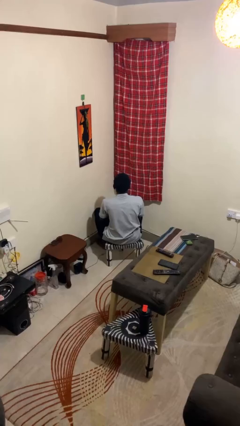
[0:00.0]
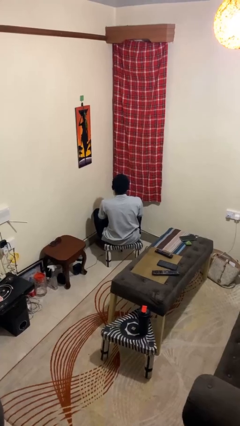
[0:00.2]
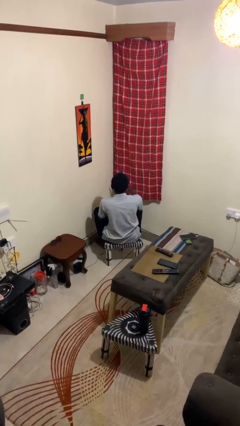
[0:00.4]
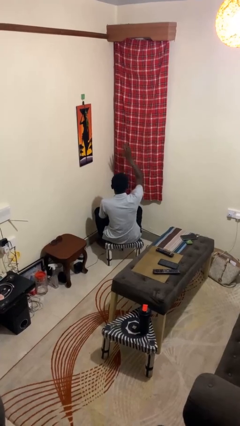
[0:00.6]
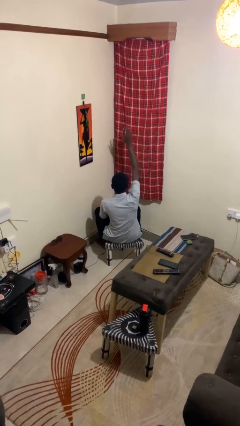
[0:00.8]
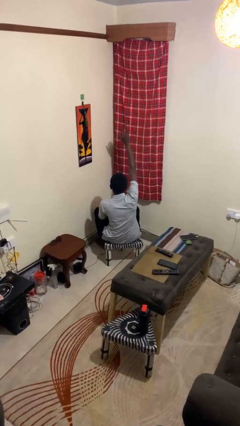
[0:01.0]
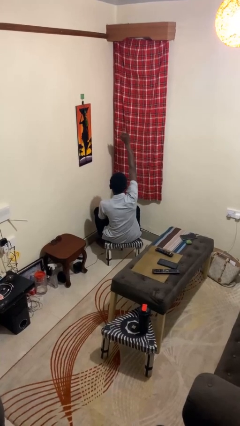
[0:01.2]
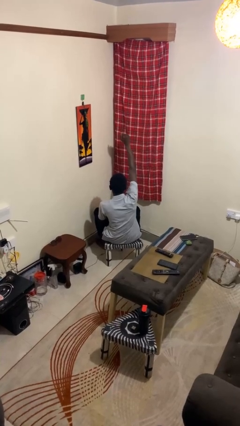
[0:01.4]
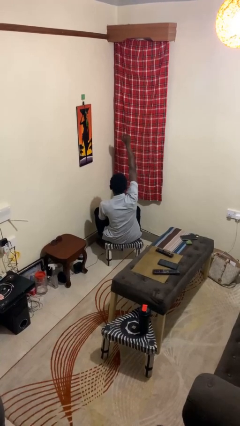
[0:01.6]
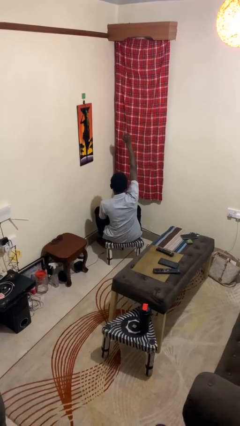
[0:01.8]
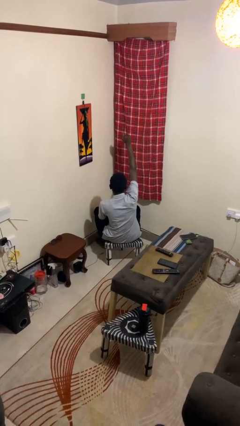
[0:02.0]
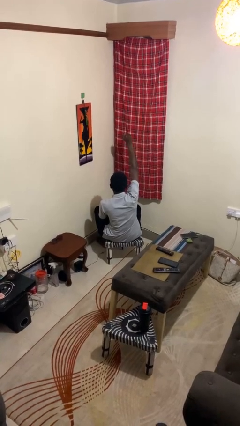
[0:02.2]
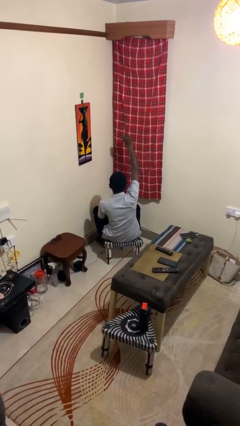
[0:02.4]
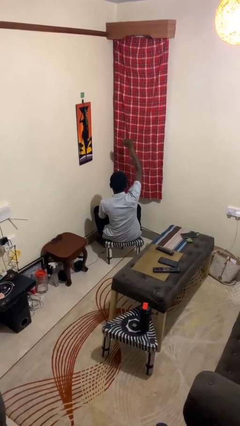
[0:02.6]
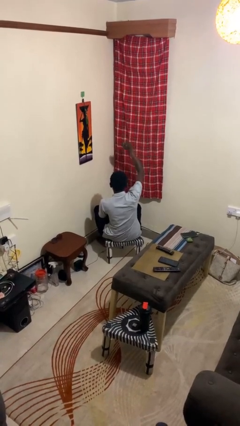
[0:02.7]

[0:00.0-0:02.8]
person gestures come here

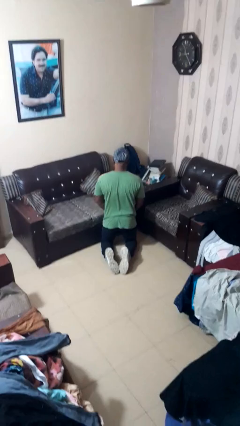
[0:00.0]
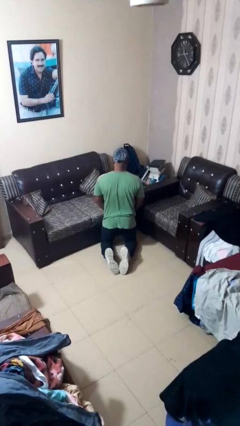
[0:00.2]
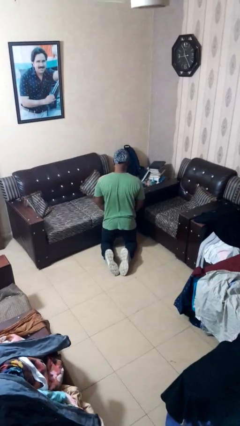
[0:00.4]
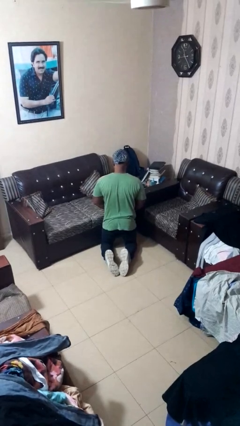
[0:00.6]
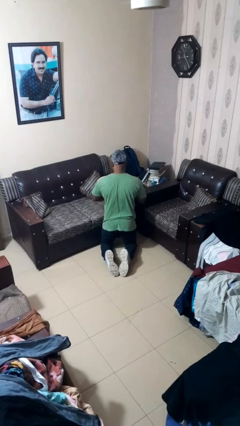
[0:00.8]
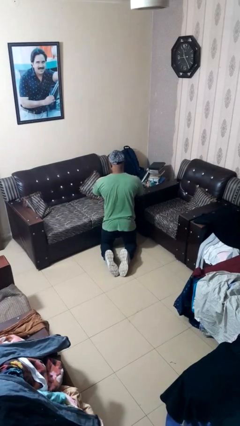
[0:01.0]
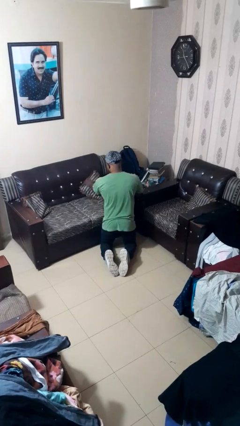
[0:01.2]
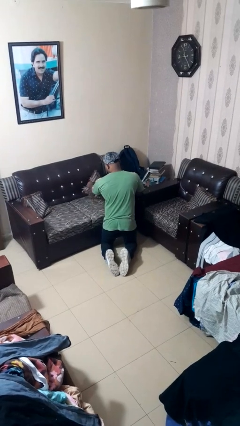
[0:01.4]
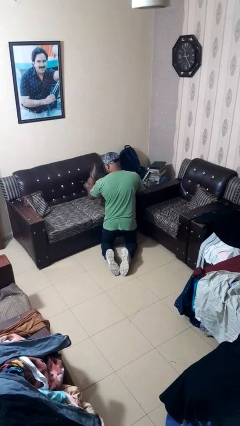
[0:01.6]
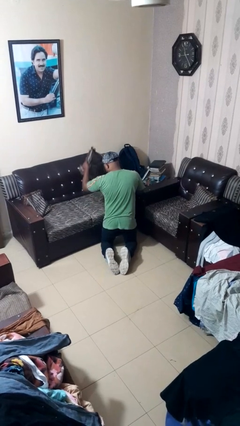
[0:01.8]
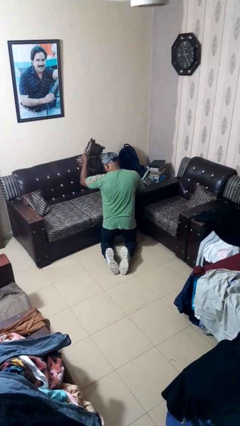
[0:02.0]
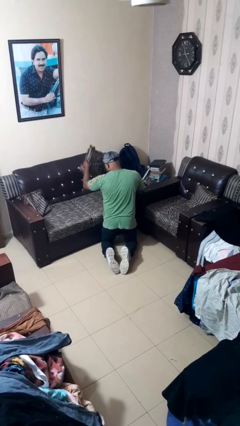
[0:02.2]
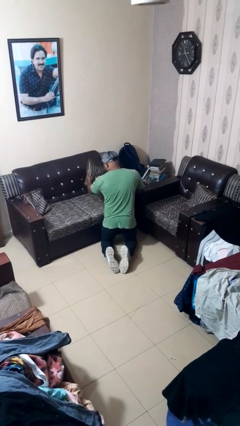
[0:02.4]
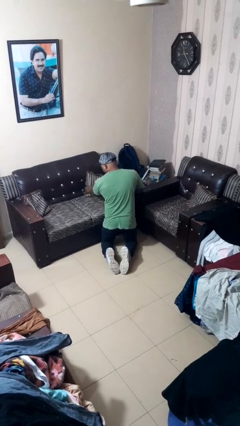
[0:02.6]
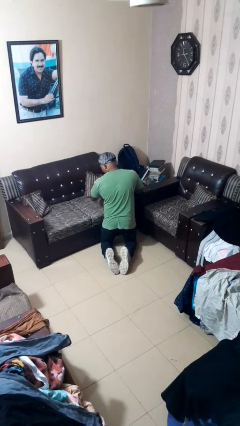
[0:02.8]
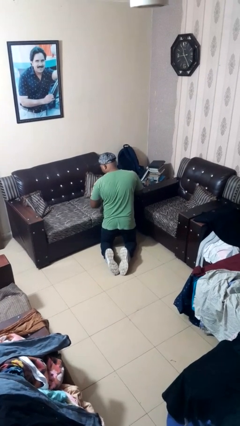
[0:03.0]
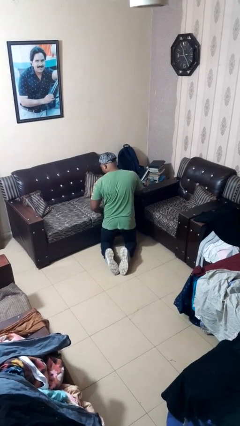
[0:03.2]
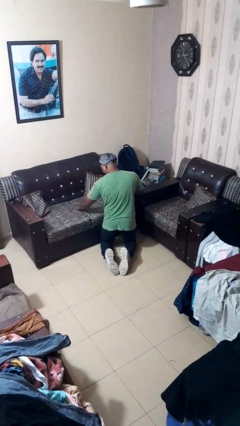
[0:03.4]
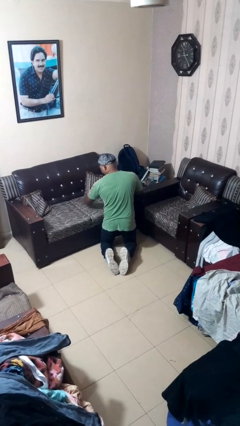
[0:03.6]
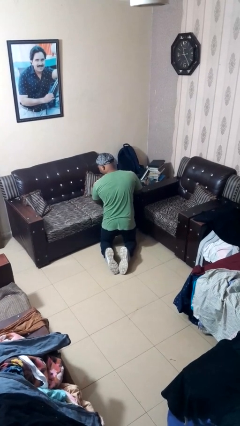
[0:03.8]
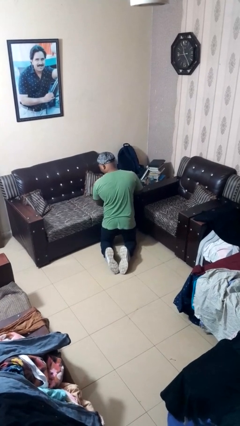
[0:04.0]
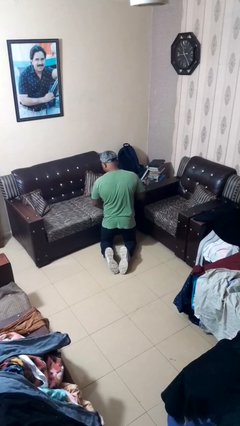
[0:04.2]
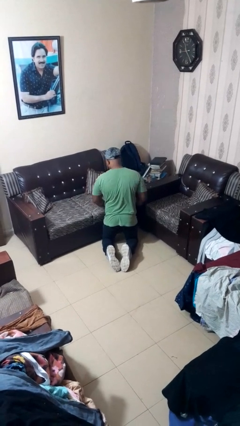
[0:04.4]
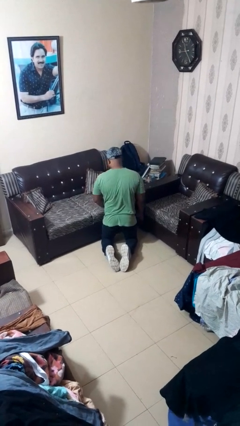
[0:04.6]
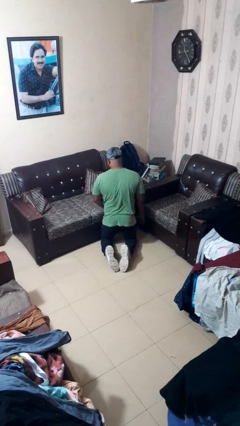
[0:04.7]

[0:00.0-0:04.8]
person searches in couch

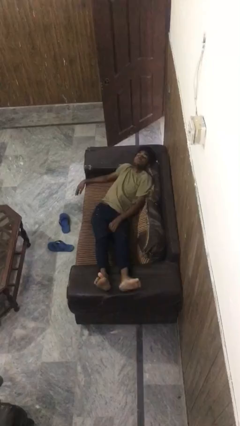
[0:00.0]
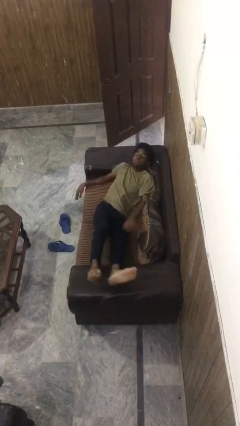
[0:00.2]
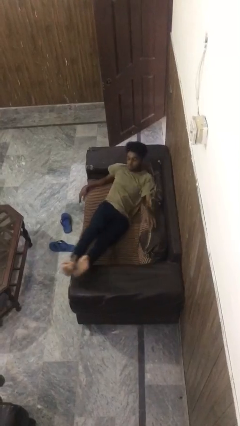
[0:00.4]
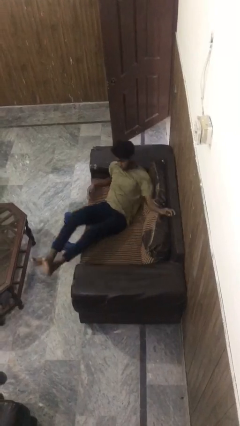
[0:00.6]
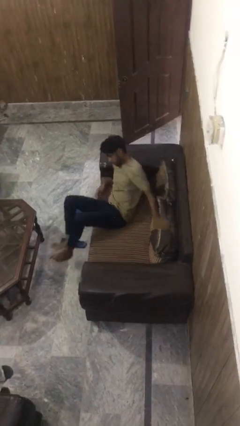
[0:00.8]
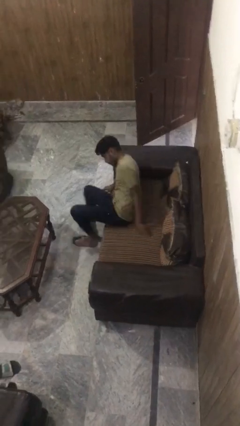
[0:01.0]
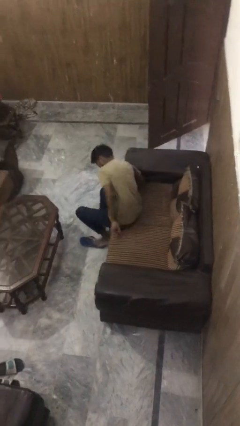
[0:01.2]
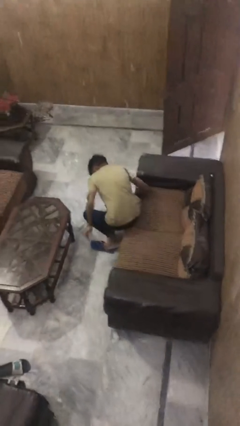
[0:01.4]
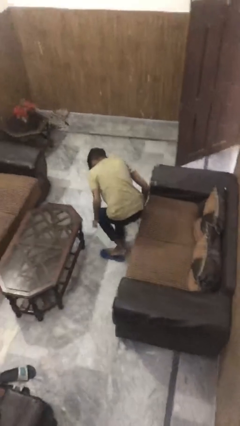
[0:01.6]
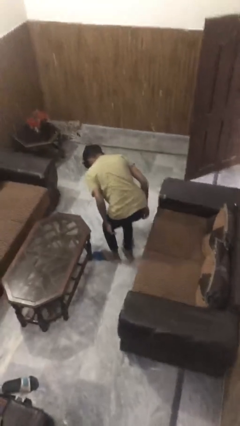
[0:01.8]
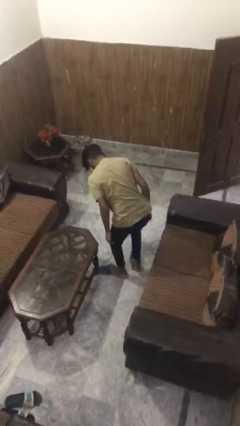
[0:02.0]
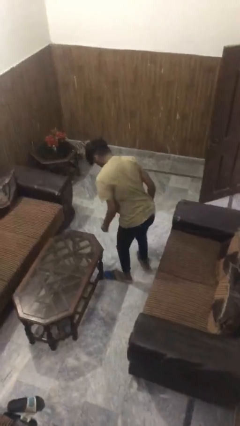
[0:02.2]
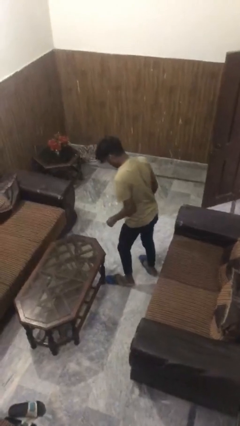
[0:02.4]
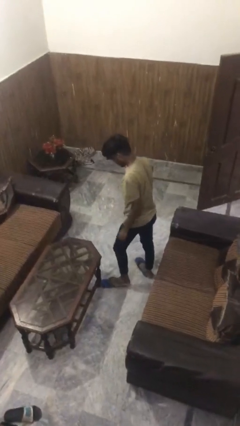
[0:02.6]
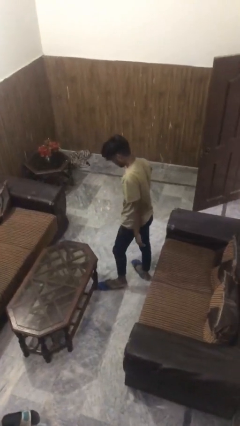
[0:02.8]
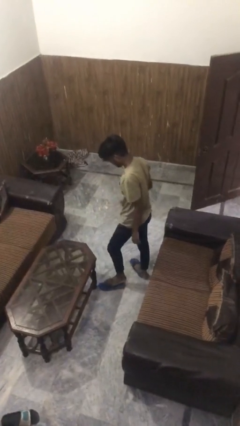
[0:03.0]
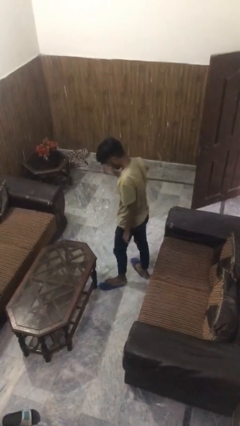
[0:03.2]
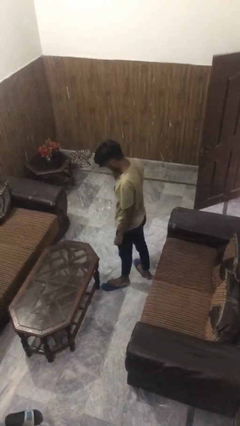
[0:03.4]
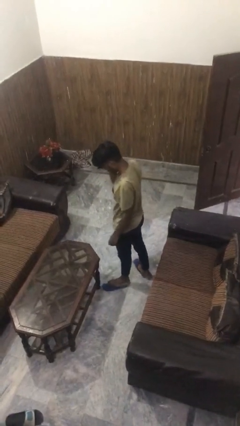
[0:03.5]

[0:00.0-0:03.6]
person stands up

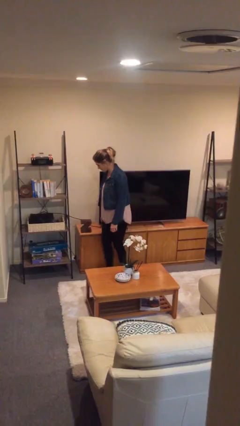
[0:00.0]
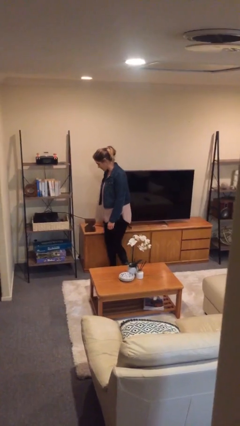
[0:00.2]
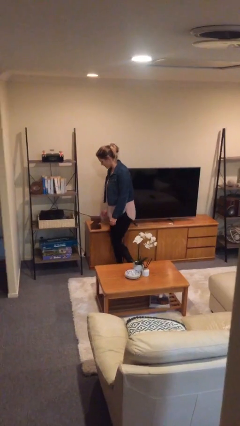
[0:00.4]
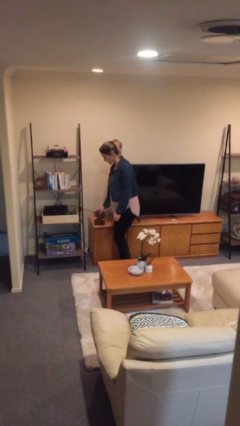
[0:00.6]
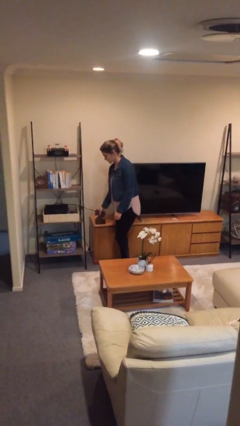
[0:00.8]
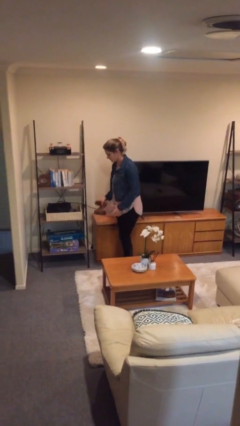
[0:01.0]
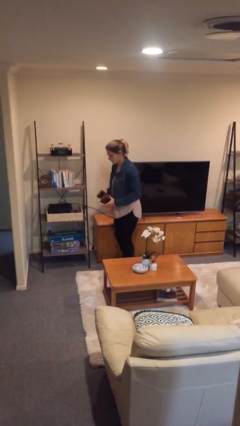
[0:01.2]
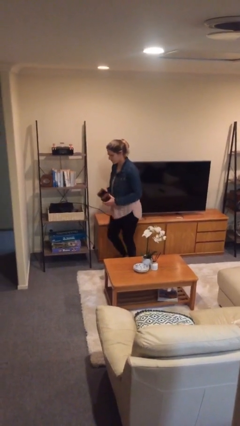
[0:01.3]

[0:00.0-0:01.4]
person picks up object from table

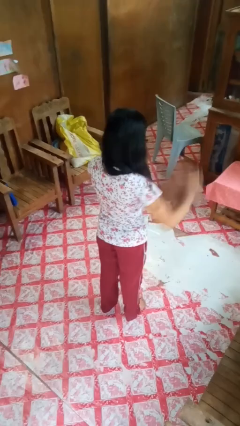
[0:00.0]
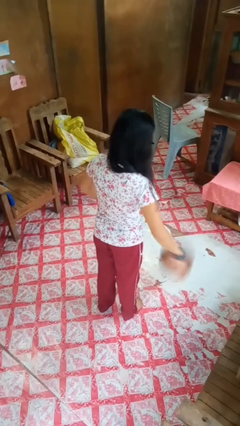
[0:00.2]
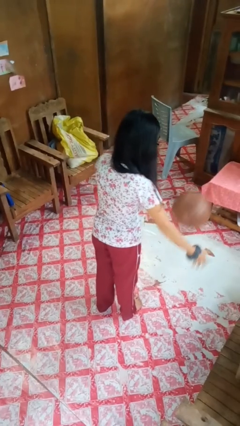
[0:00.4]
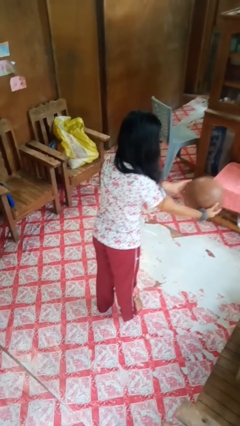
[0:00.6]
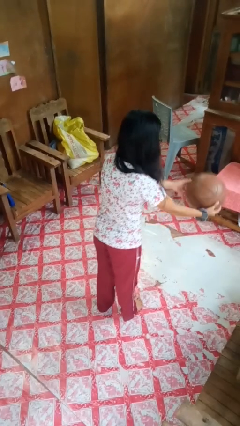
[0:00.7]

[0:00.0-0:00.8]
person bounces ball on floor

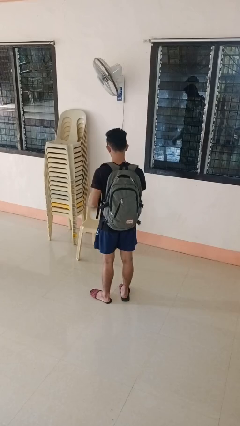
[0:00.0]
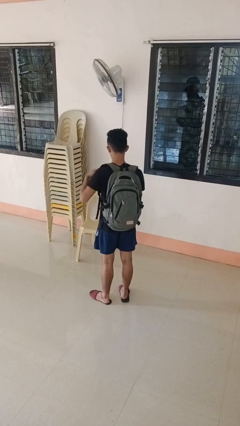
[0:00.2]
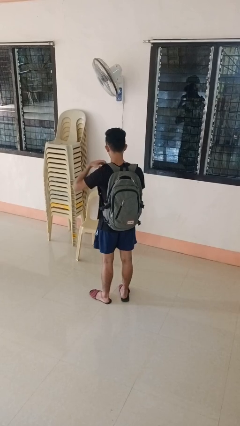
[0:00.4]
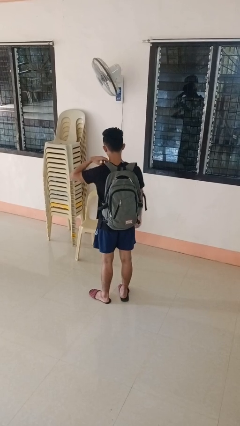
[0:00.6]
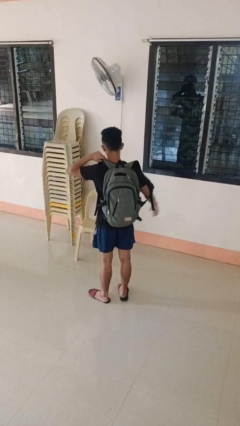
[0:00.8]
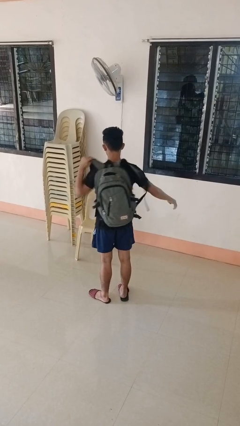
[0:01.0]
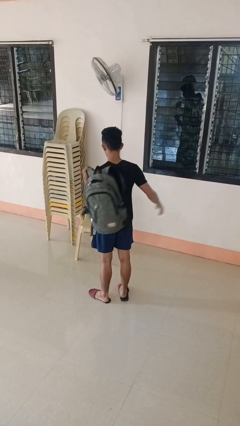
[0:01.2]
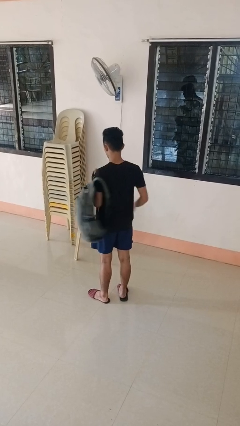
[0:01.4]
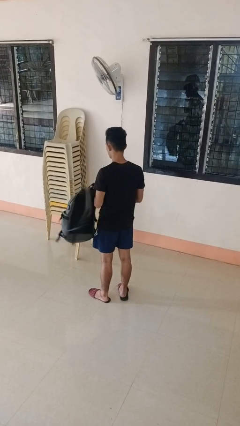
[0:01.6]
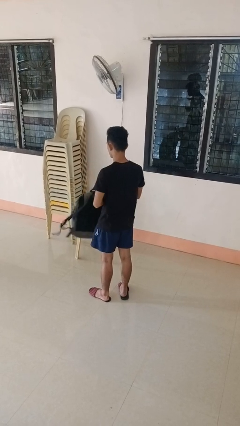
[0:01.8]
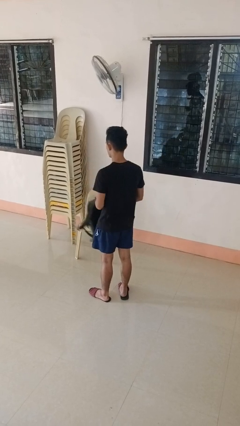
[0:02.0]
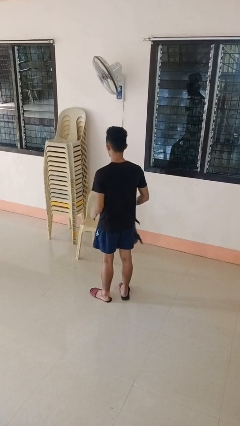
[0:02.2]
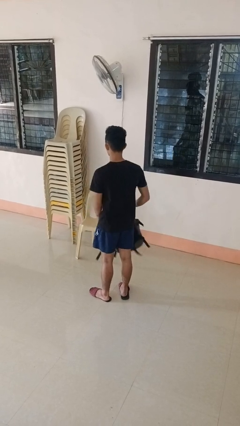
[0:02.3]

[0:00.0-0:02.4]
person takes off backpack

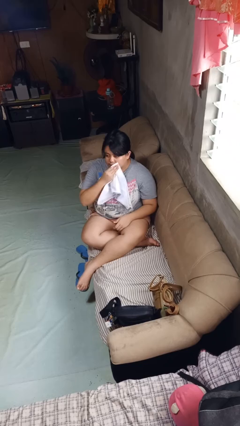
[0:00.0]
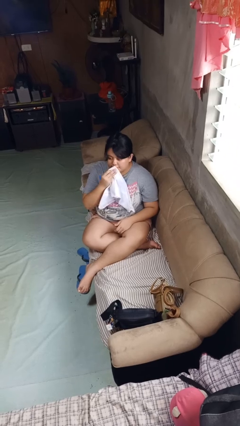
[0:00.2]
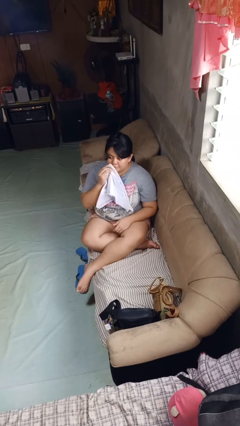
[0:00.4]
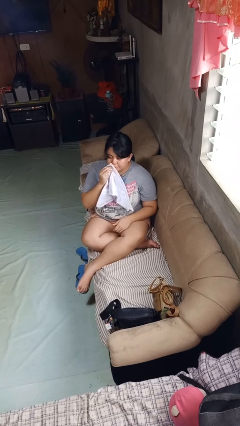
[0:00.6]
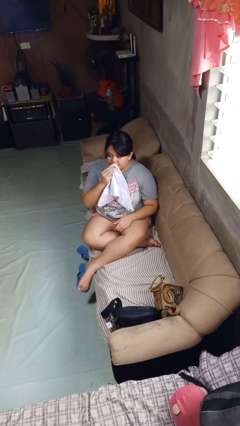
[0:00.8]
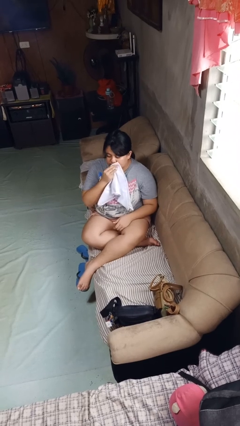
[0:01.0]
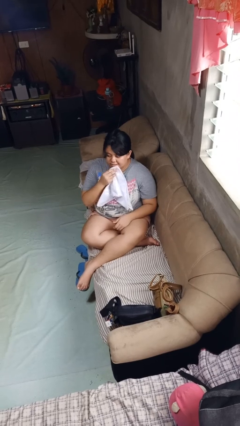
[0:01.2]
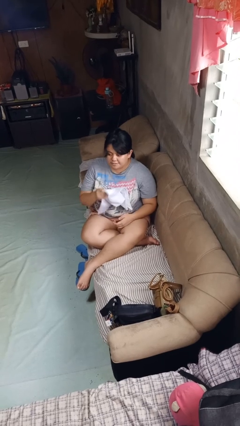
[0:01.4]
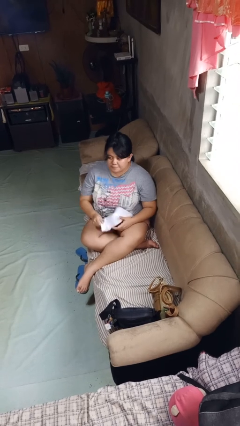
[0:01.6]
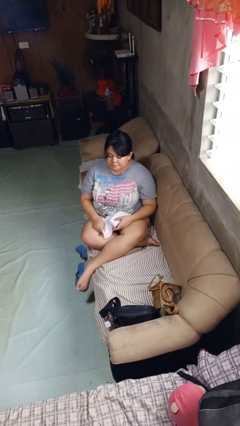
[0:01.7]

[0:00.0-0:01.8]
person wipes mouth with napkin
